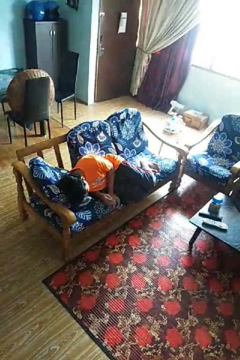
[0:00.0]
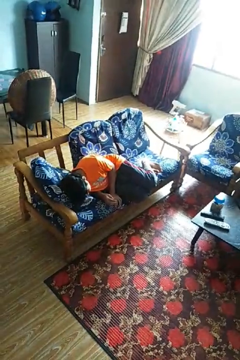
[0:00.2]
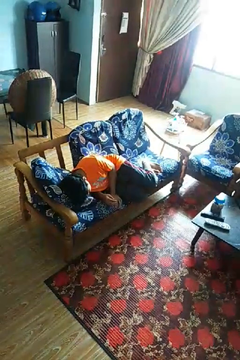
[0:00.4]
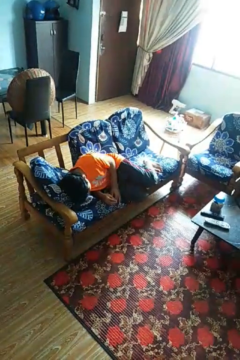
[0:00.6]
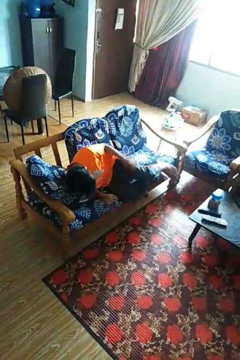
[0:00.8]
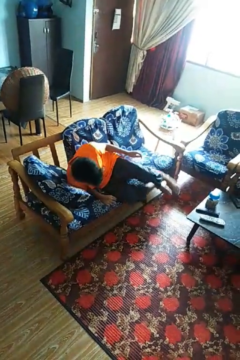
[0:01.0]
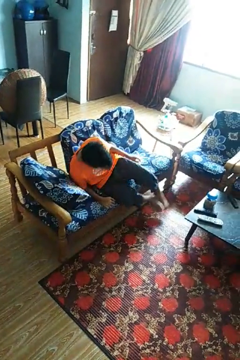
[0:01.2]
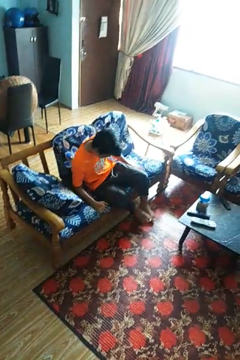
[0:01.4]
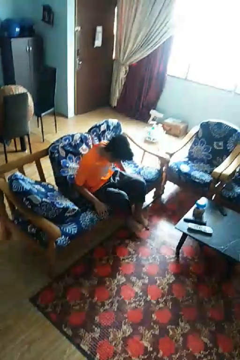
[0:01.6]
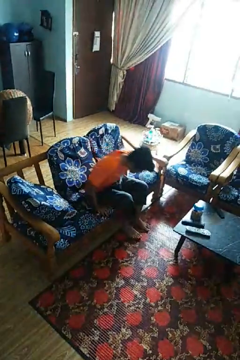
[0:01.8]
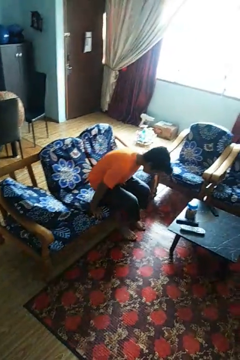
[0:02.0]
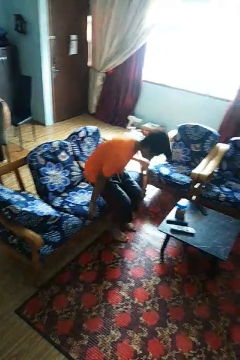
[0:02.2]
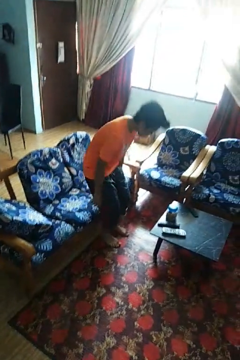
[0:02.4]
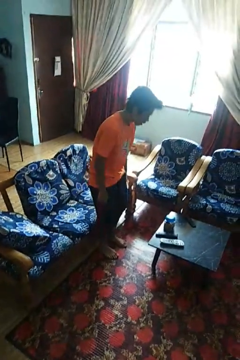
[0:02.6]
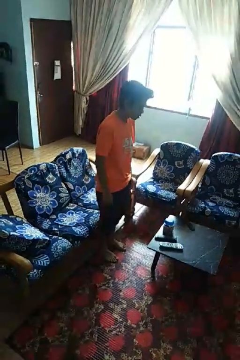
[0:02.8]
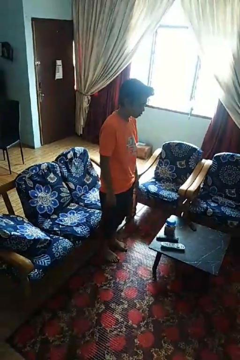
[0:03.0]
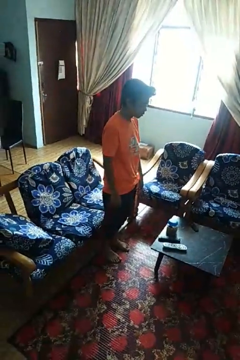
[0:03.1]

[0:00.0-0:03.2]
person stands up

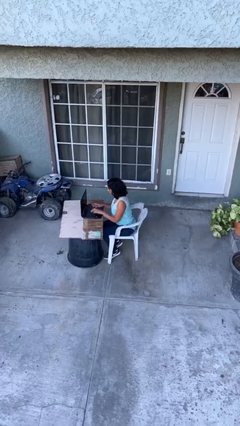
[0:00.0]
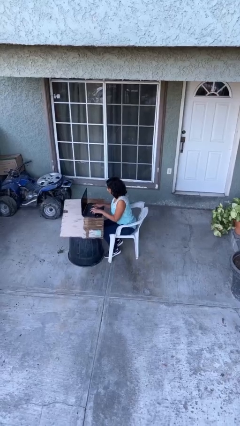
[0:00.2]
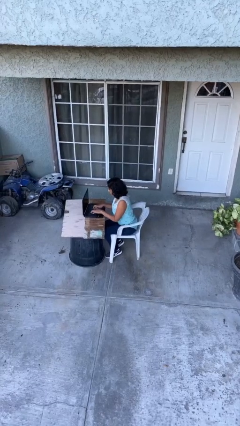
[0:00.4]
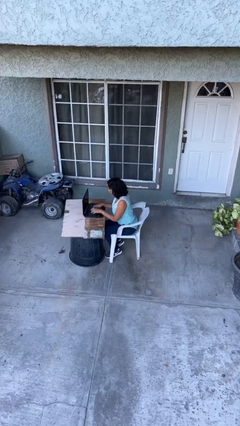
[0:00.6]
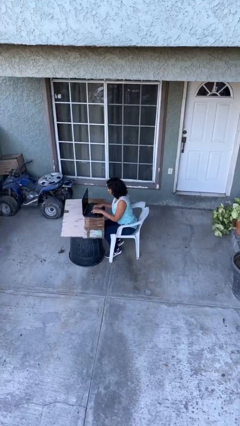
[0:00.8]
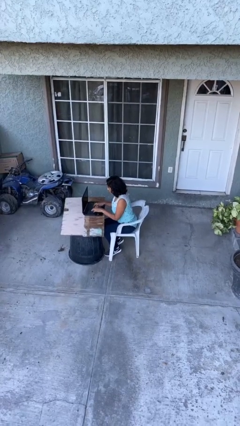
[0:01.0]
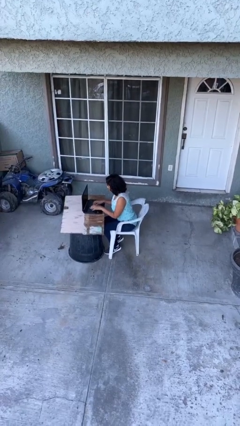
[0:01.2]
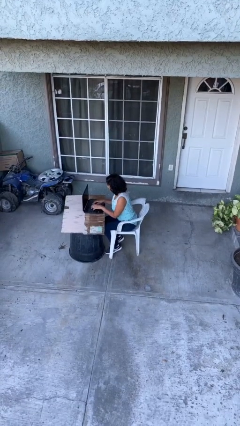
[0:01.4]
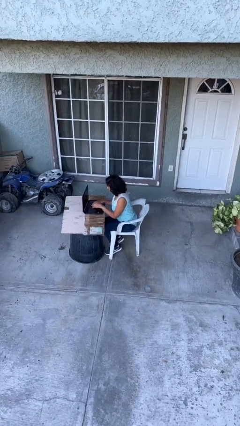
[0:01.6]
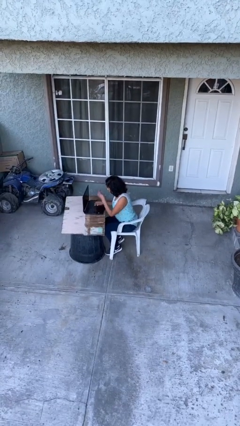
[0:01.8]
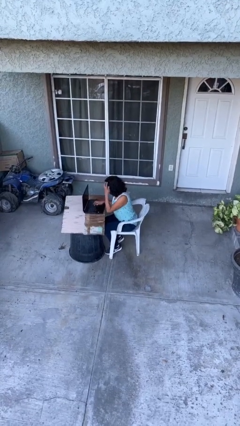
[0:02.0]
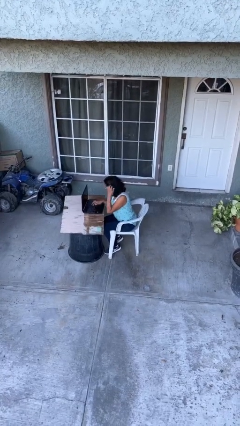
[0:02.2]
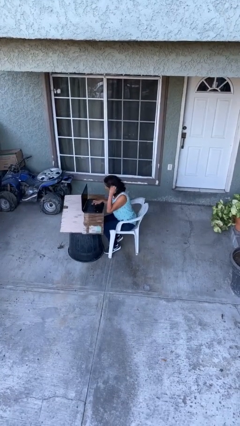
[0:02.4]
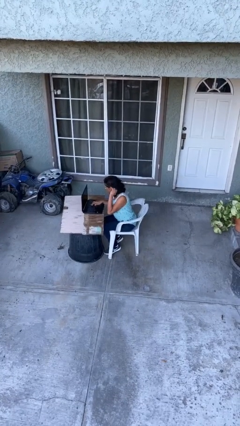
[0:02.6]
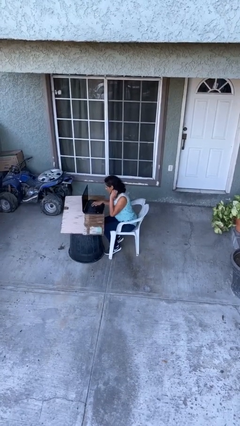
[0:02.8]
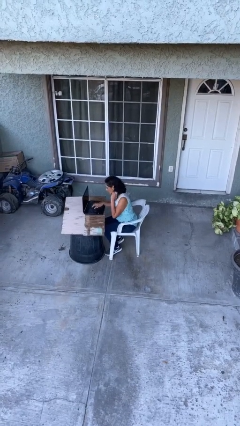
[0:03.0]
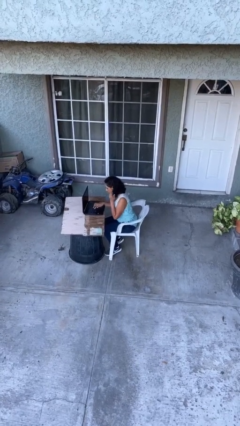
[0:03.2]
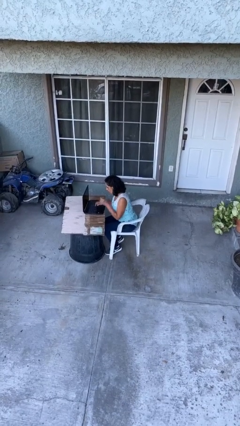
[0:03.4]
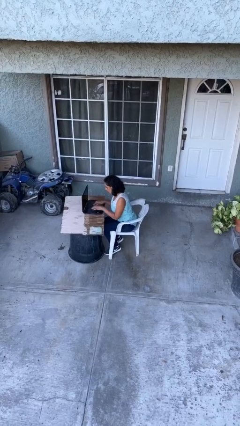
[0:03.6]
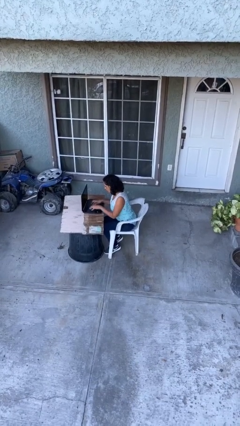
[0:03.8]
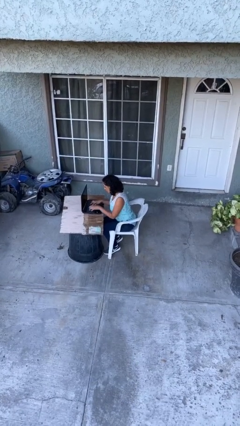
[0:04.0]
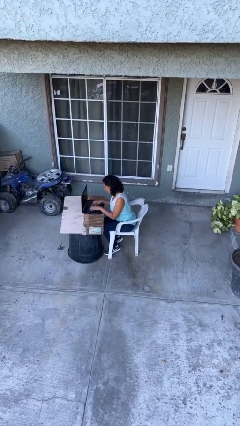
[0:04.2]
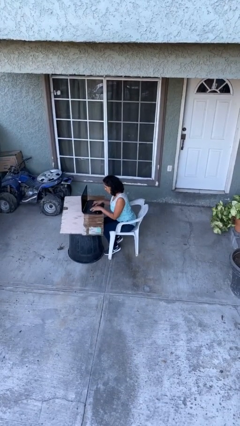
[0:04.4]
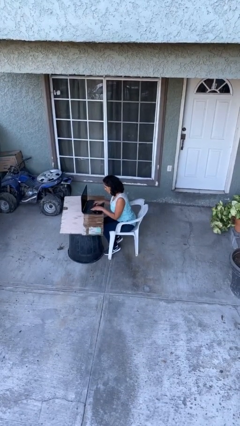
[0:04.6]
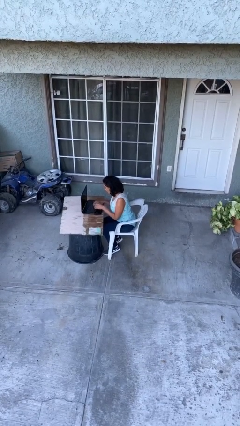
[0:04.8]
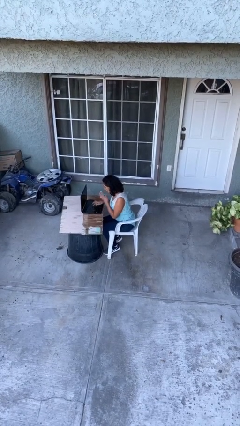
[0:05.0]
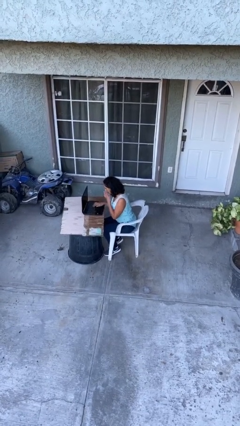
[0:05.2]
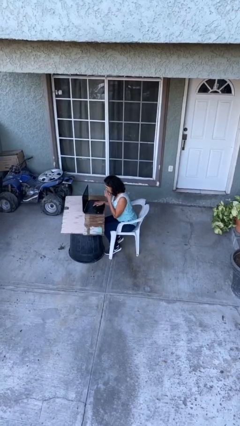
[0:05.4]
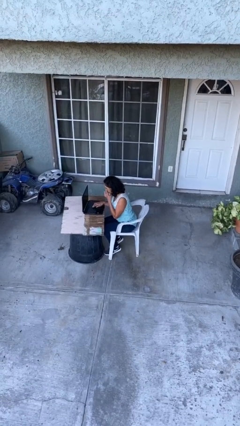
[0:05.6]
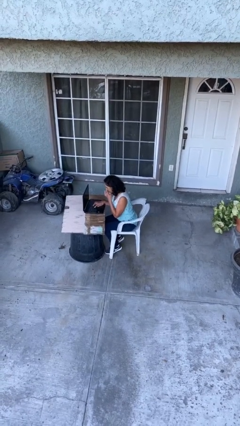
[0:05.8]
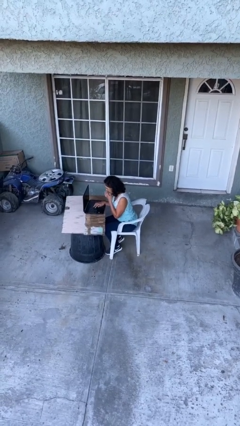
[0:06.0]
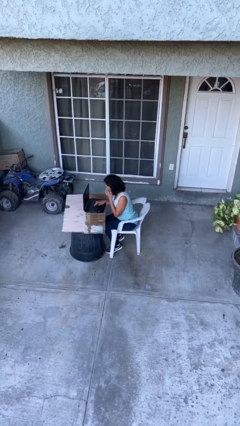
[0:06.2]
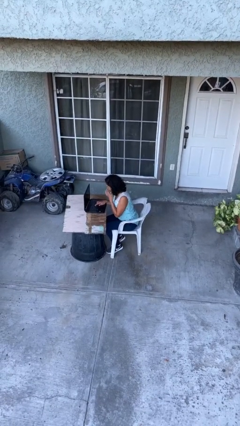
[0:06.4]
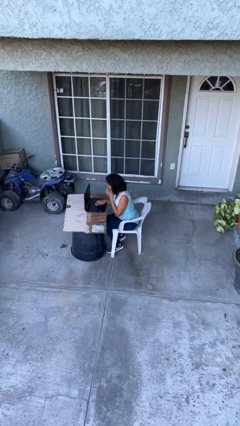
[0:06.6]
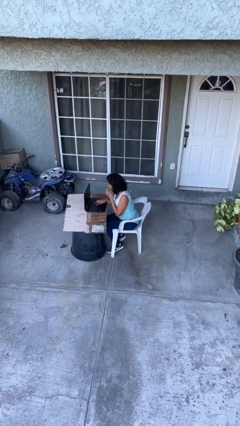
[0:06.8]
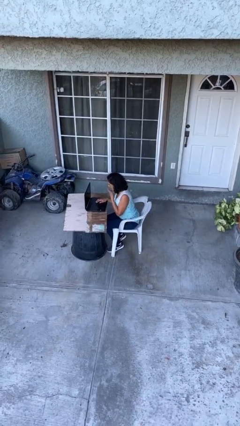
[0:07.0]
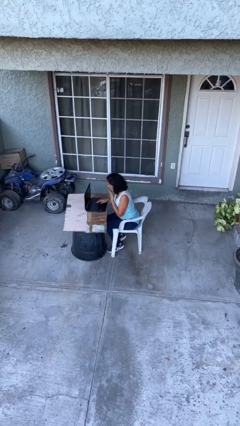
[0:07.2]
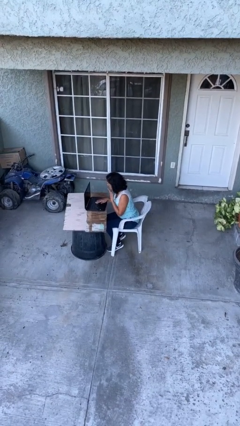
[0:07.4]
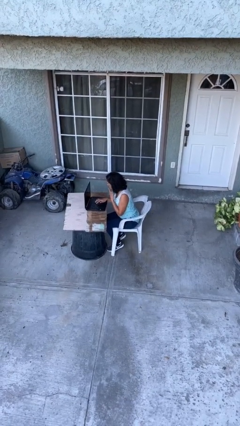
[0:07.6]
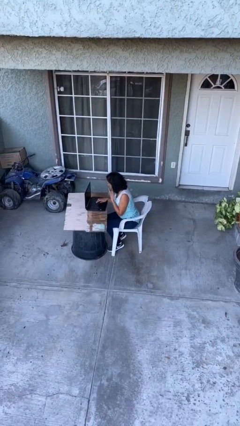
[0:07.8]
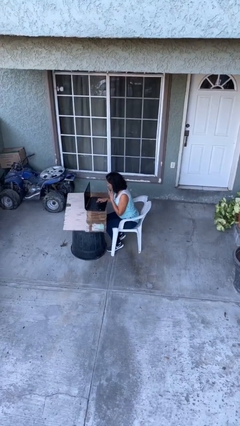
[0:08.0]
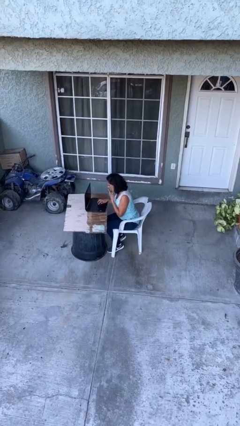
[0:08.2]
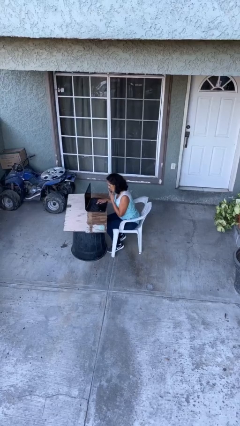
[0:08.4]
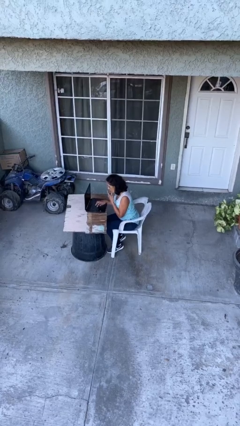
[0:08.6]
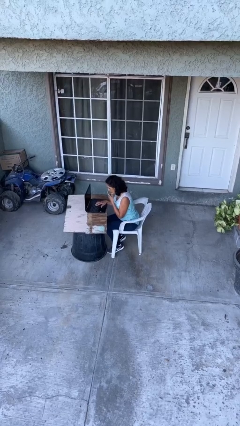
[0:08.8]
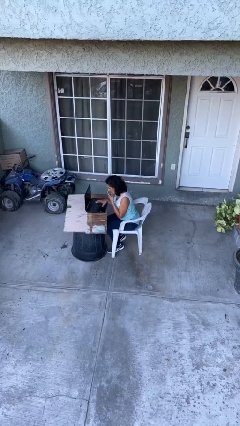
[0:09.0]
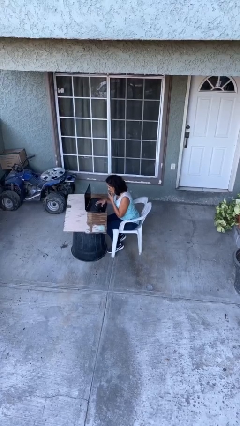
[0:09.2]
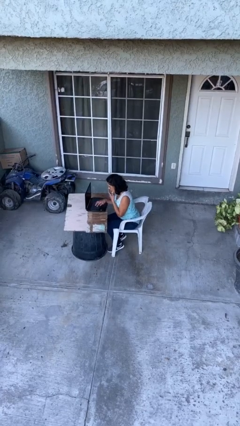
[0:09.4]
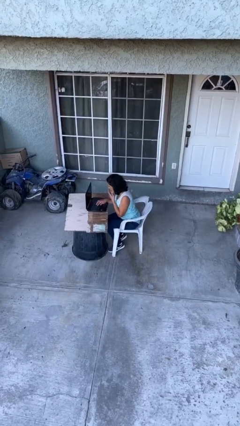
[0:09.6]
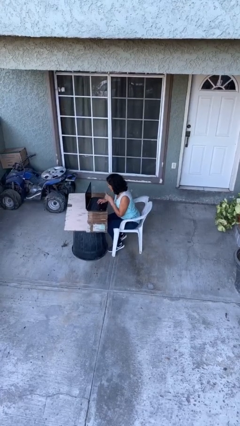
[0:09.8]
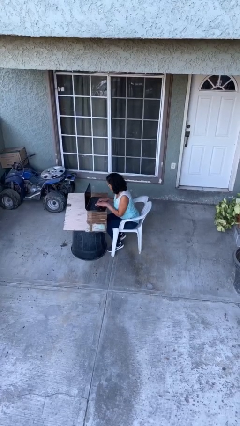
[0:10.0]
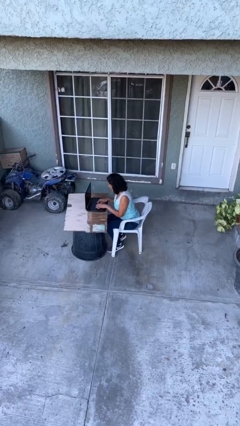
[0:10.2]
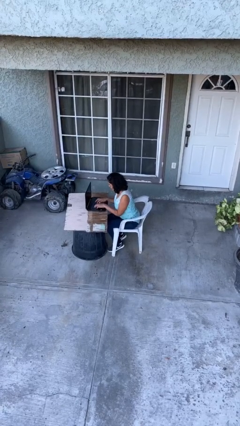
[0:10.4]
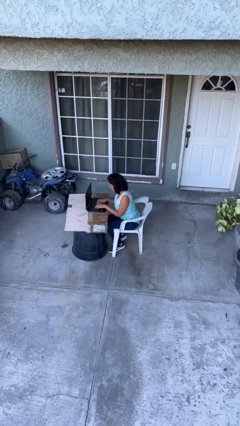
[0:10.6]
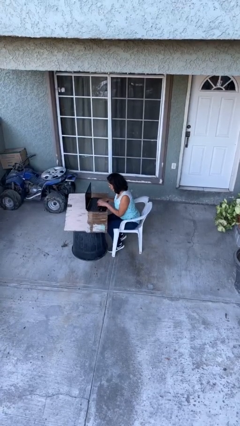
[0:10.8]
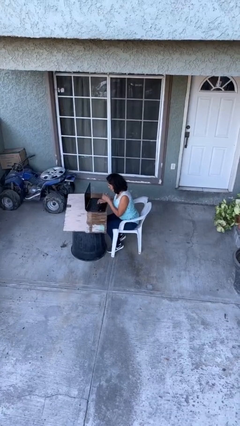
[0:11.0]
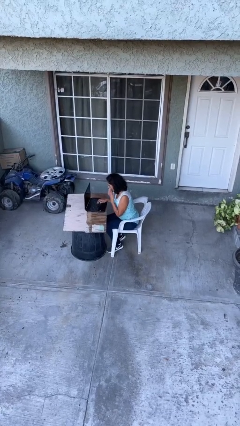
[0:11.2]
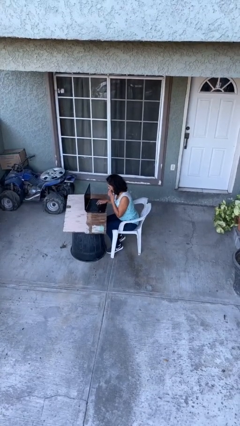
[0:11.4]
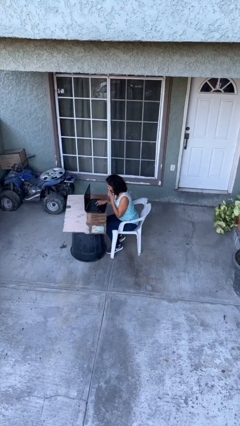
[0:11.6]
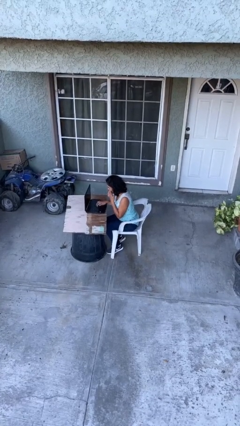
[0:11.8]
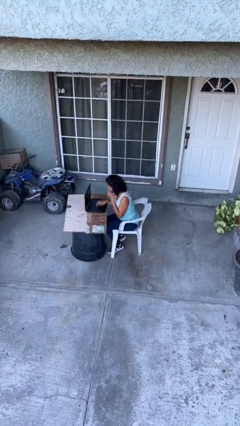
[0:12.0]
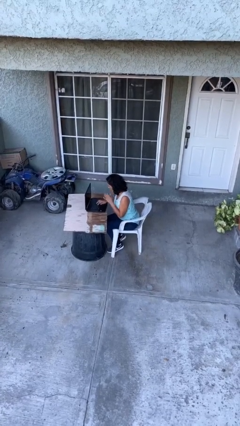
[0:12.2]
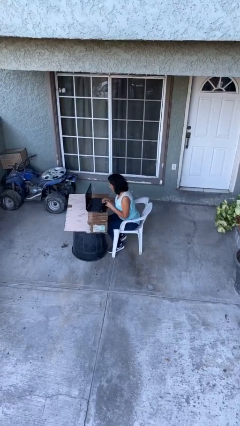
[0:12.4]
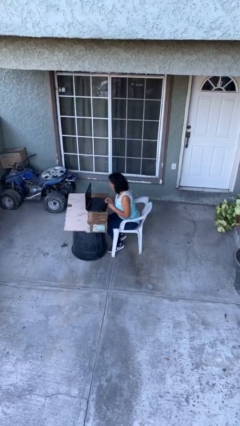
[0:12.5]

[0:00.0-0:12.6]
person interacts with laptop

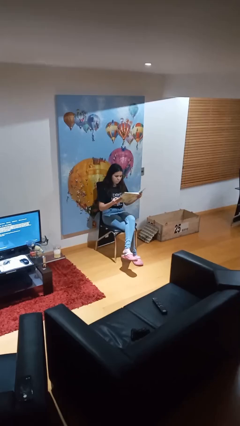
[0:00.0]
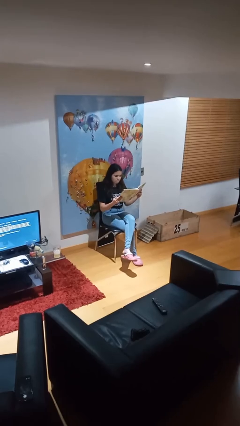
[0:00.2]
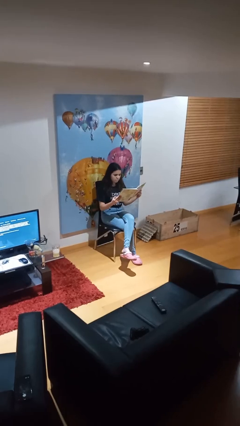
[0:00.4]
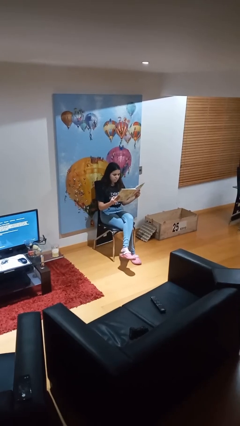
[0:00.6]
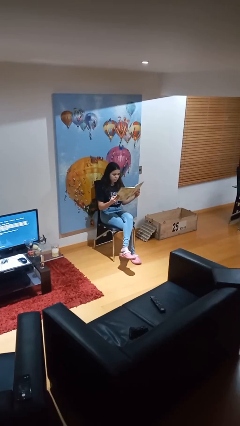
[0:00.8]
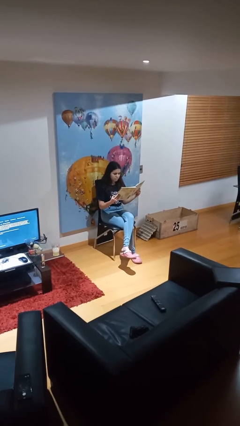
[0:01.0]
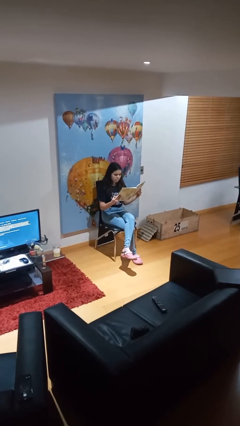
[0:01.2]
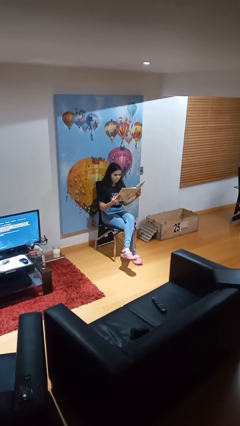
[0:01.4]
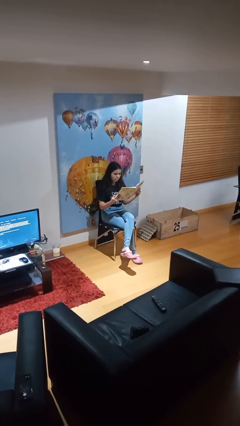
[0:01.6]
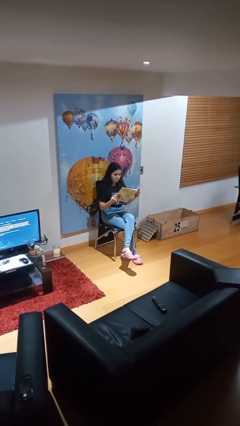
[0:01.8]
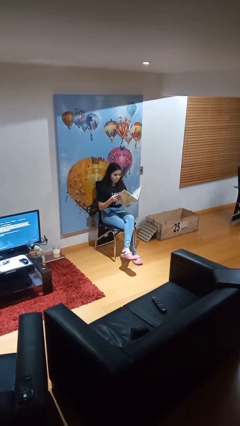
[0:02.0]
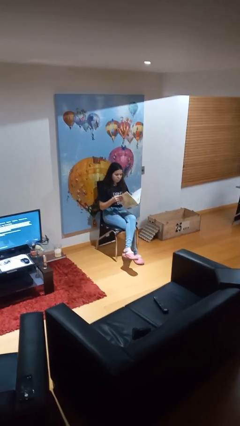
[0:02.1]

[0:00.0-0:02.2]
person reads document

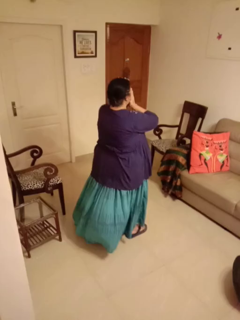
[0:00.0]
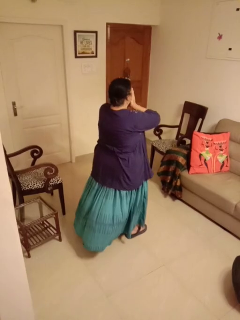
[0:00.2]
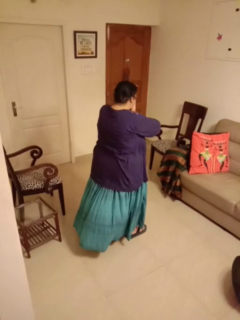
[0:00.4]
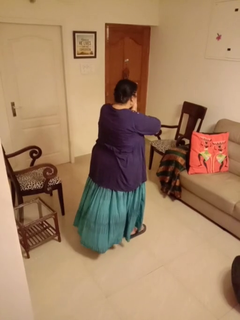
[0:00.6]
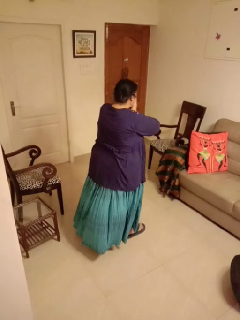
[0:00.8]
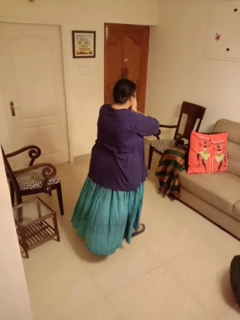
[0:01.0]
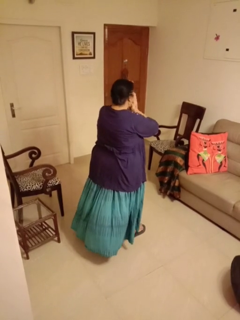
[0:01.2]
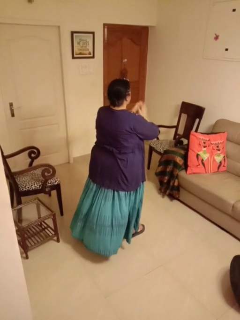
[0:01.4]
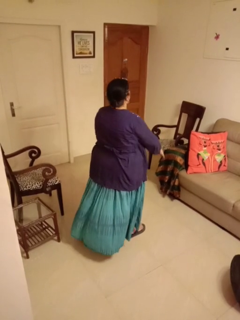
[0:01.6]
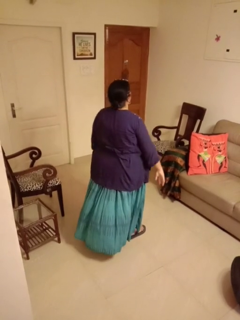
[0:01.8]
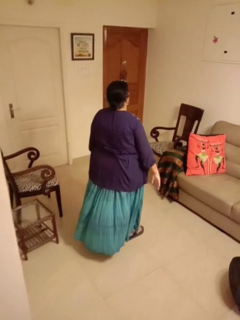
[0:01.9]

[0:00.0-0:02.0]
person sneezes into hand
